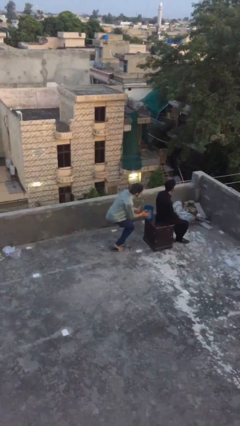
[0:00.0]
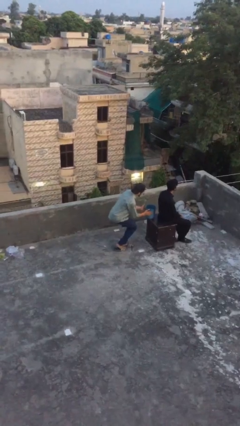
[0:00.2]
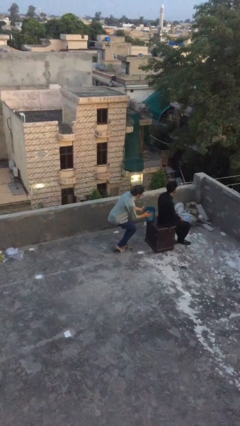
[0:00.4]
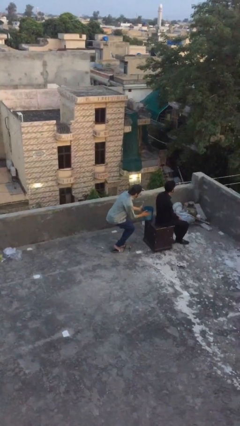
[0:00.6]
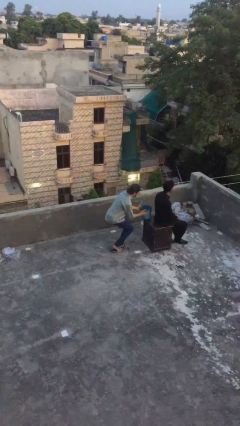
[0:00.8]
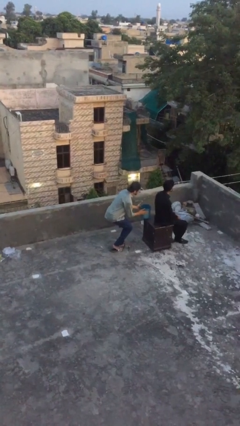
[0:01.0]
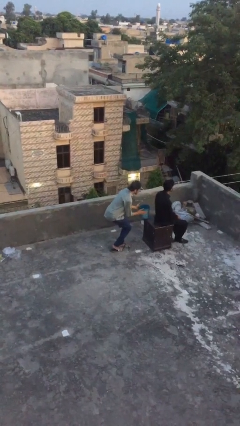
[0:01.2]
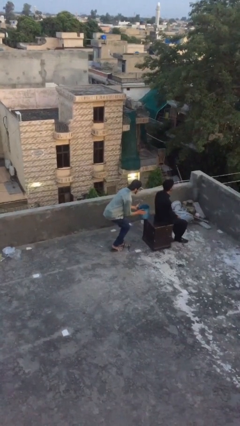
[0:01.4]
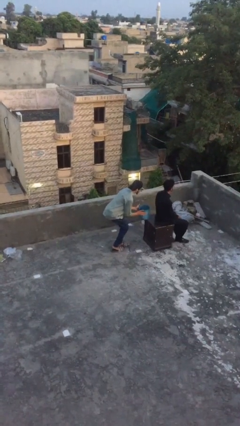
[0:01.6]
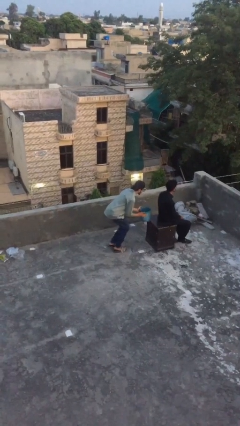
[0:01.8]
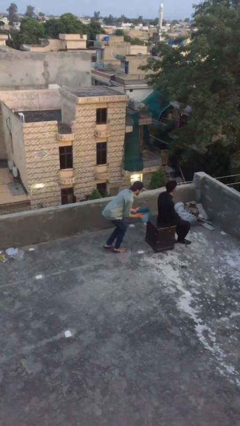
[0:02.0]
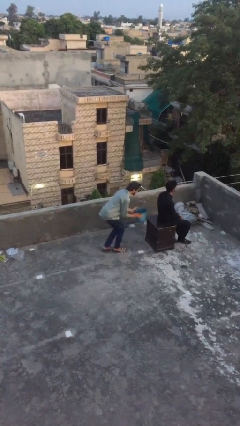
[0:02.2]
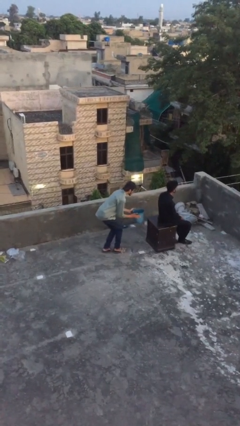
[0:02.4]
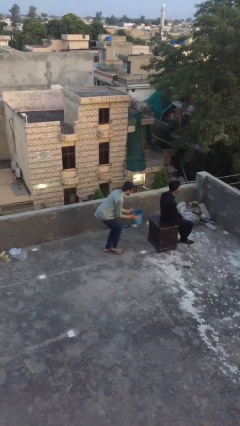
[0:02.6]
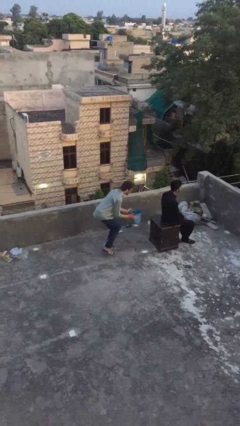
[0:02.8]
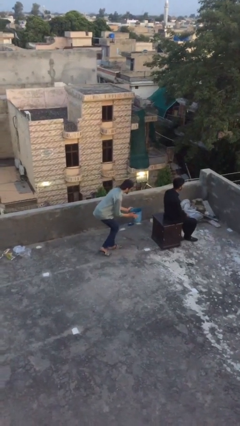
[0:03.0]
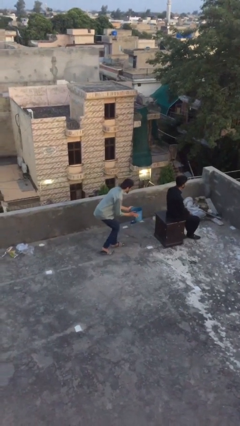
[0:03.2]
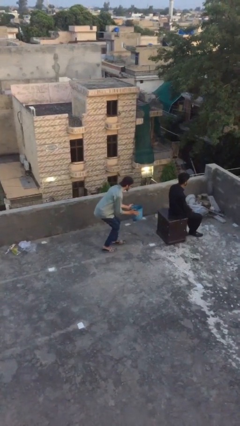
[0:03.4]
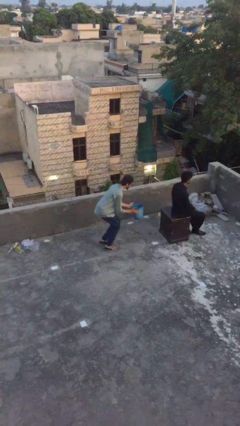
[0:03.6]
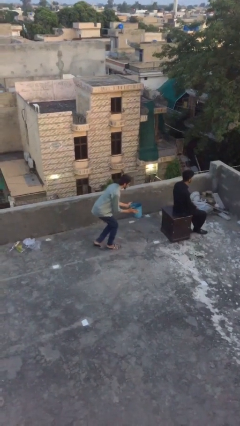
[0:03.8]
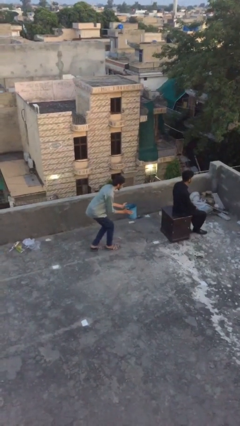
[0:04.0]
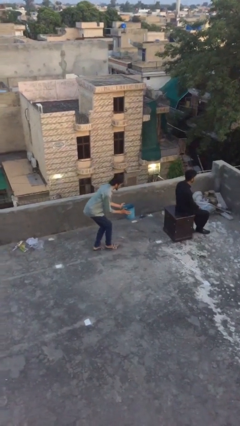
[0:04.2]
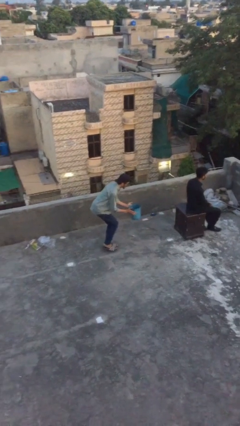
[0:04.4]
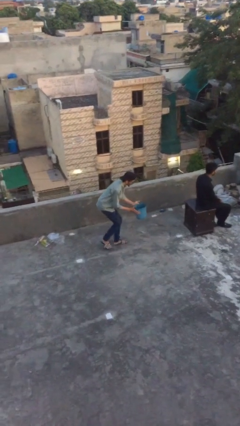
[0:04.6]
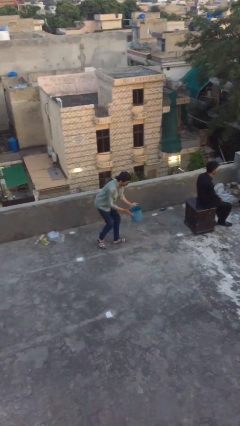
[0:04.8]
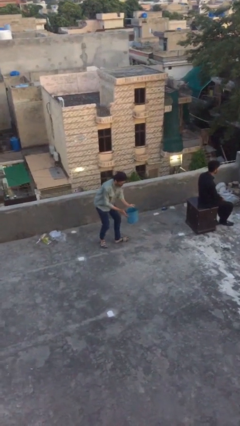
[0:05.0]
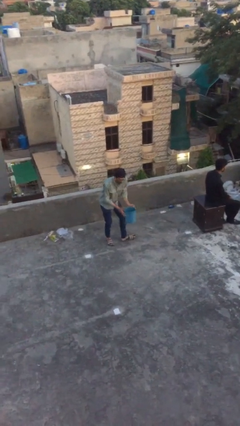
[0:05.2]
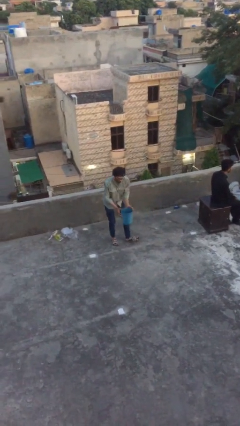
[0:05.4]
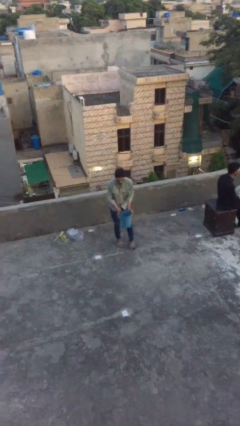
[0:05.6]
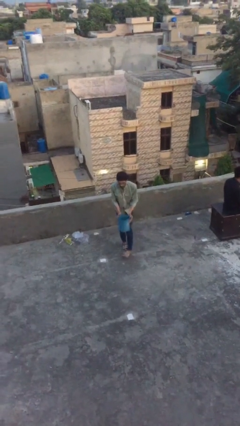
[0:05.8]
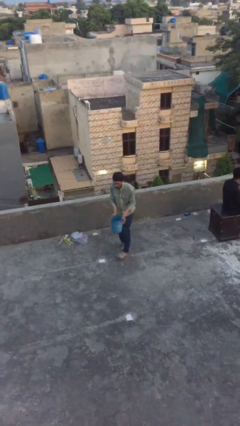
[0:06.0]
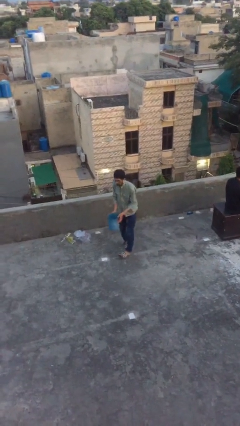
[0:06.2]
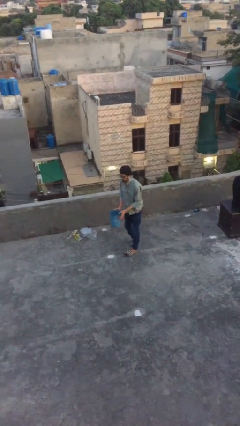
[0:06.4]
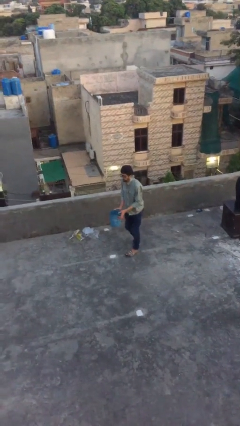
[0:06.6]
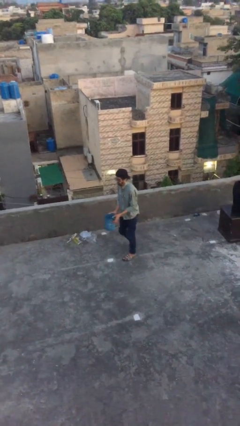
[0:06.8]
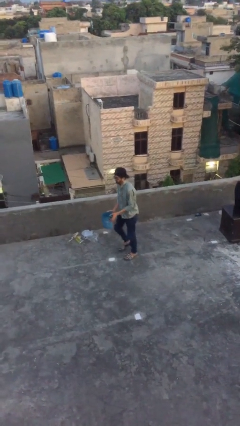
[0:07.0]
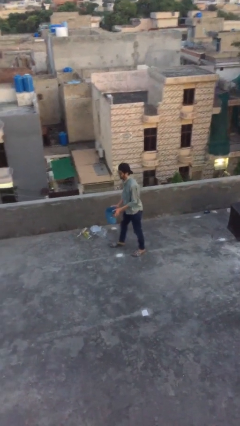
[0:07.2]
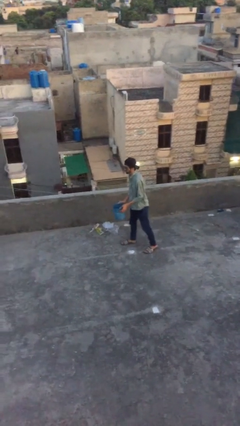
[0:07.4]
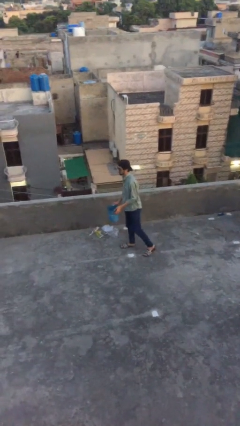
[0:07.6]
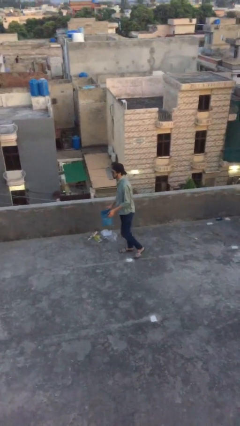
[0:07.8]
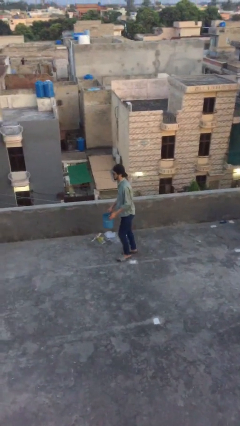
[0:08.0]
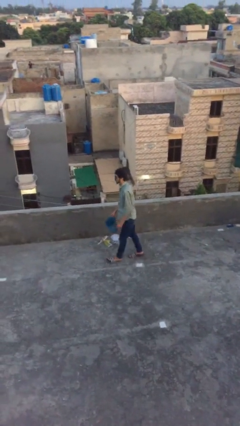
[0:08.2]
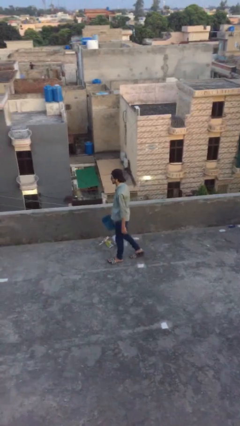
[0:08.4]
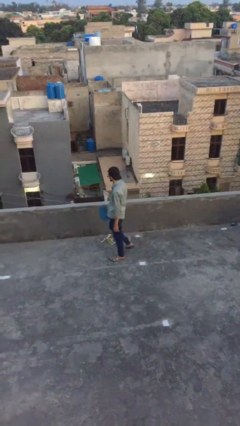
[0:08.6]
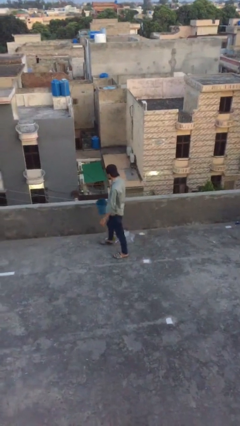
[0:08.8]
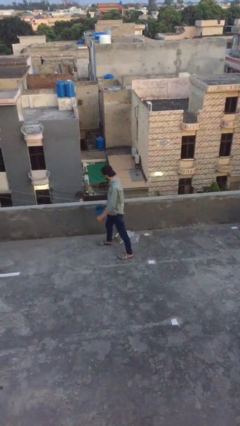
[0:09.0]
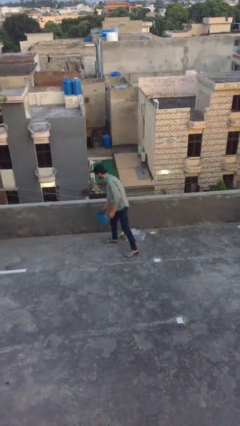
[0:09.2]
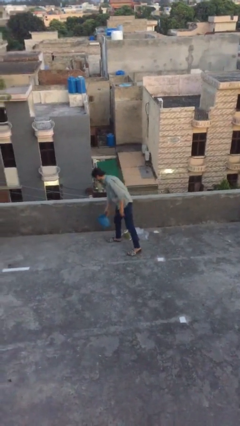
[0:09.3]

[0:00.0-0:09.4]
person steals object from person

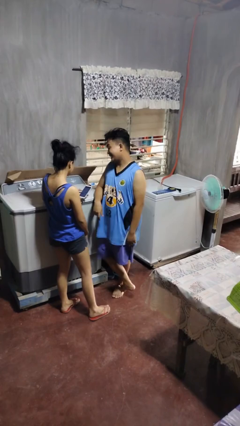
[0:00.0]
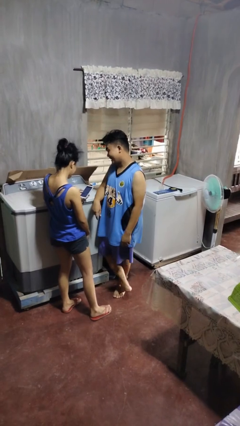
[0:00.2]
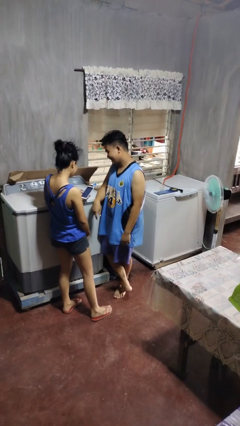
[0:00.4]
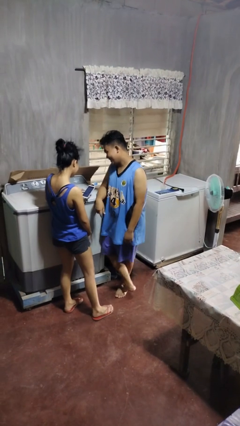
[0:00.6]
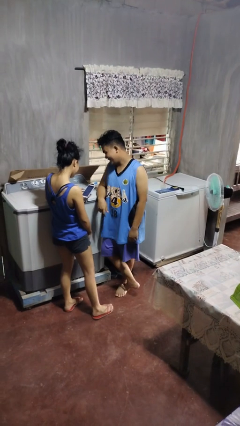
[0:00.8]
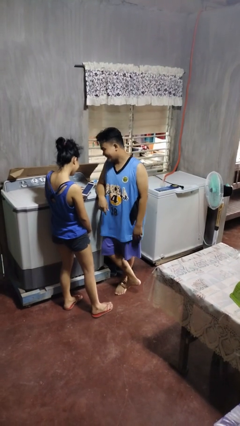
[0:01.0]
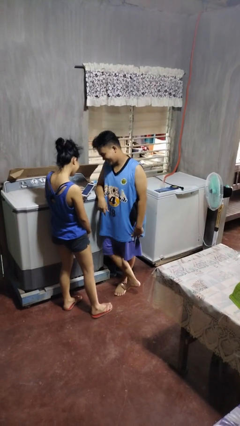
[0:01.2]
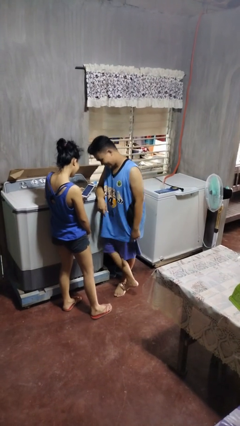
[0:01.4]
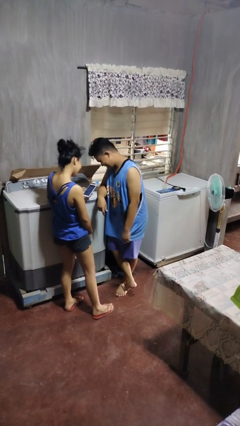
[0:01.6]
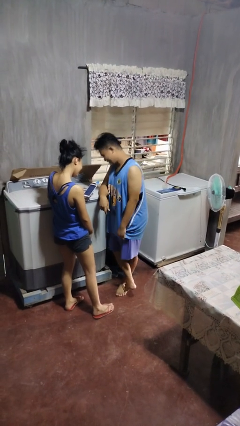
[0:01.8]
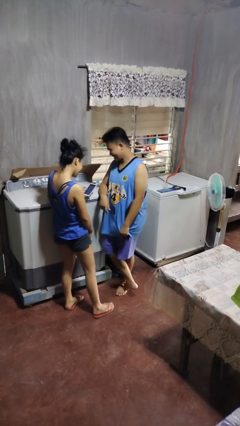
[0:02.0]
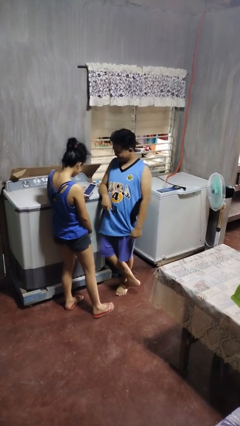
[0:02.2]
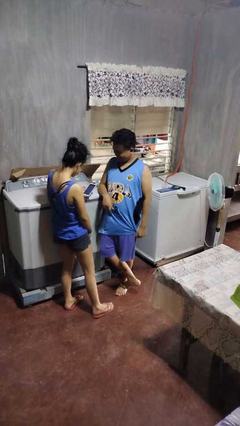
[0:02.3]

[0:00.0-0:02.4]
person laughs with person

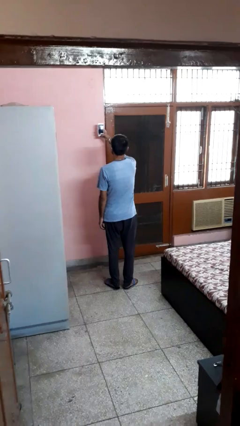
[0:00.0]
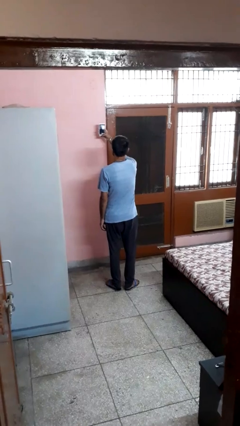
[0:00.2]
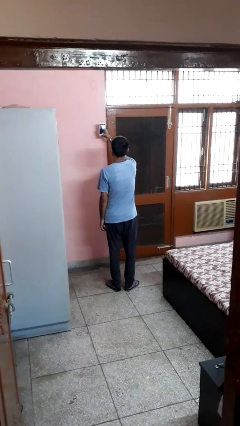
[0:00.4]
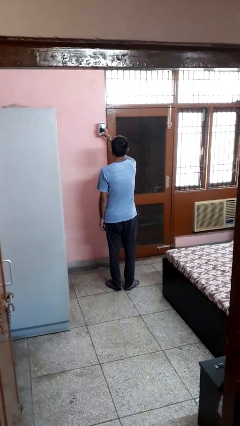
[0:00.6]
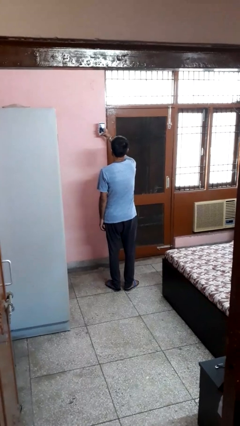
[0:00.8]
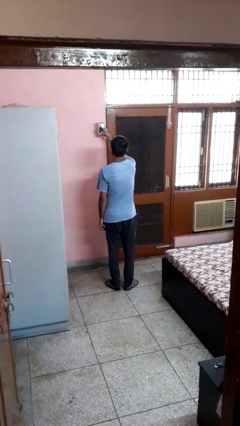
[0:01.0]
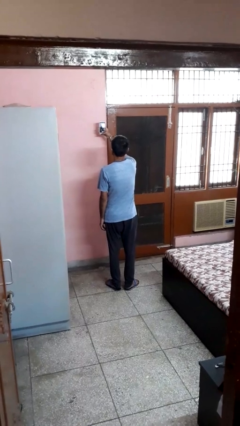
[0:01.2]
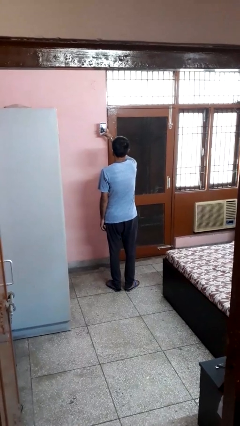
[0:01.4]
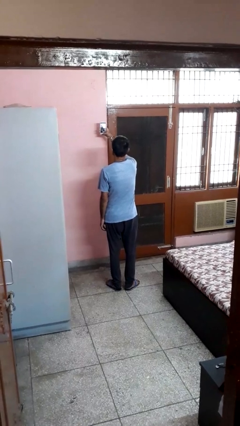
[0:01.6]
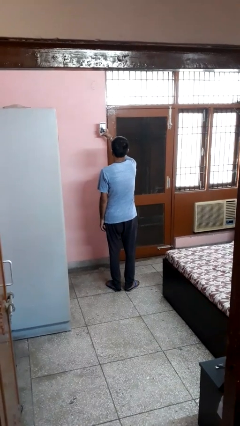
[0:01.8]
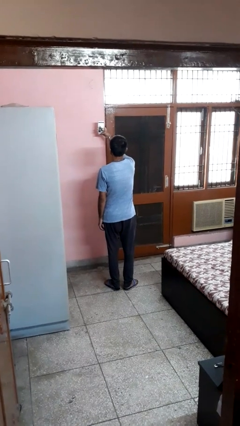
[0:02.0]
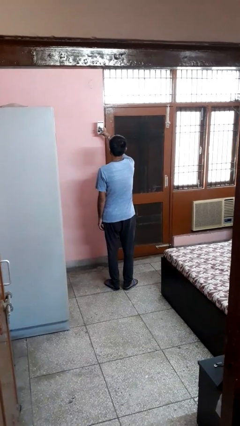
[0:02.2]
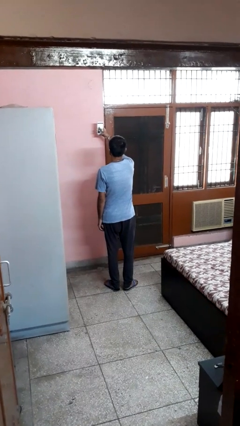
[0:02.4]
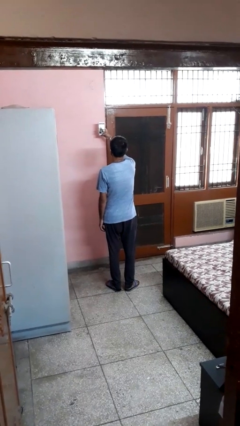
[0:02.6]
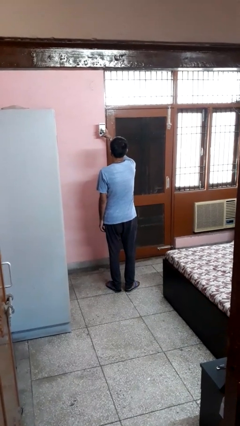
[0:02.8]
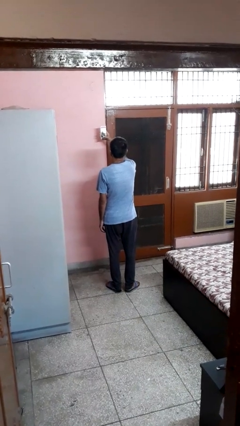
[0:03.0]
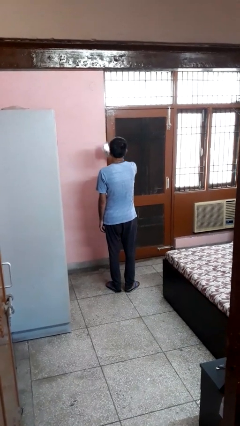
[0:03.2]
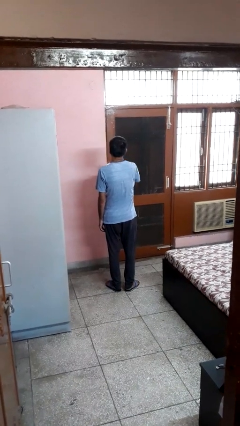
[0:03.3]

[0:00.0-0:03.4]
person takes selfie

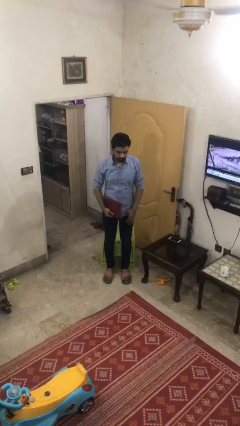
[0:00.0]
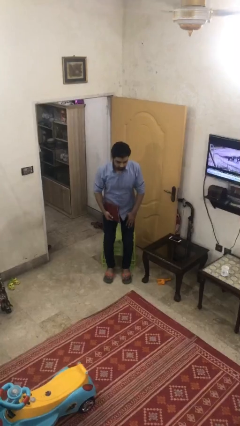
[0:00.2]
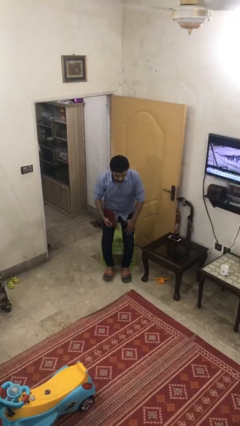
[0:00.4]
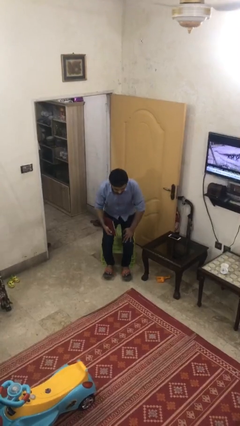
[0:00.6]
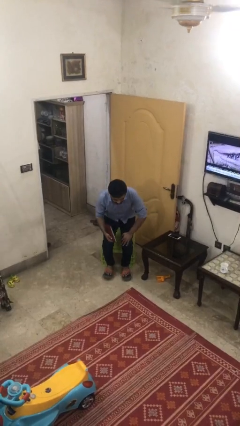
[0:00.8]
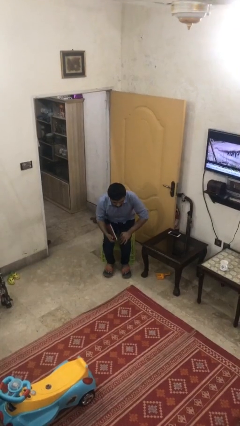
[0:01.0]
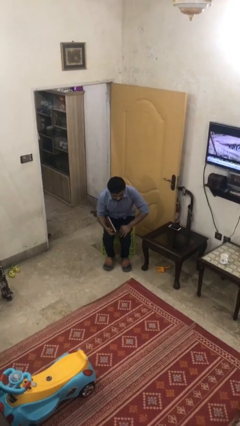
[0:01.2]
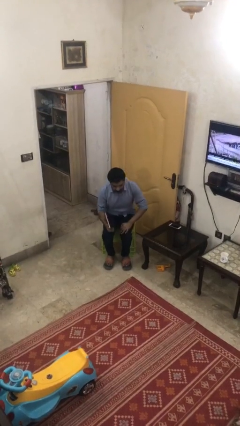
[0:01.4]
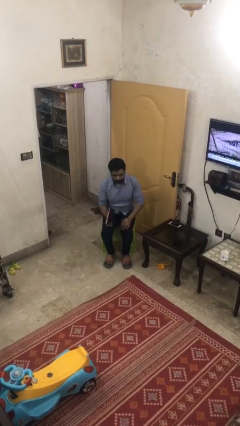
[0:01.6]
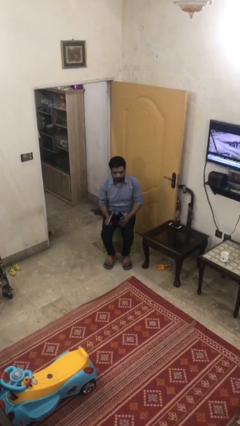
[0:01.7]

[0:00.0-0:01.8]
person sits down

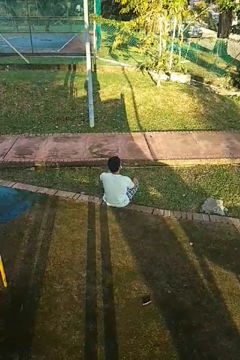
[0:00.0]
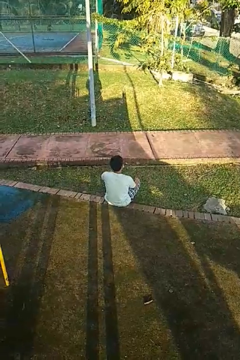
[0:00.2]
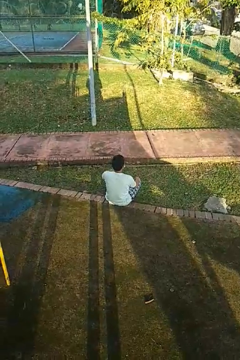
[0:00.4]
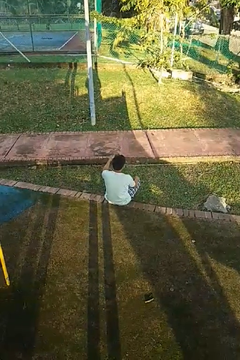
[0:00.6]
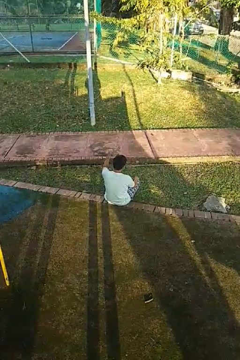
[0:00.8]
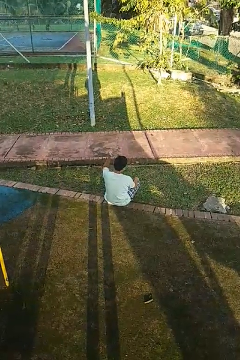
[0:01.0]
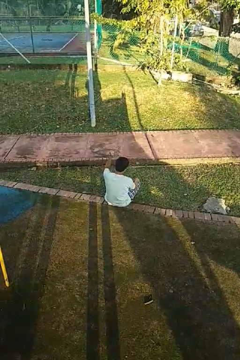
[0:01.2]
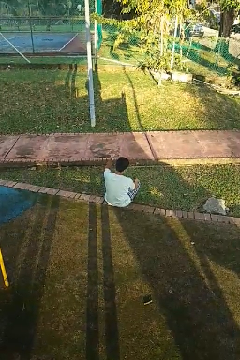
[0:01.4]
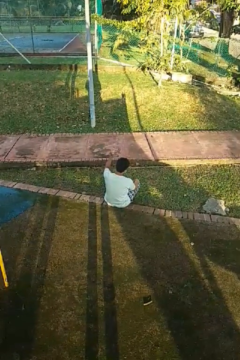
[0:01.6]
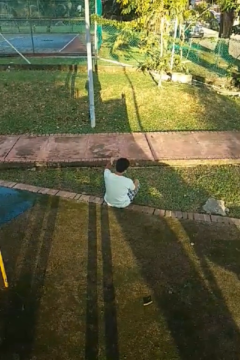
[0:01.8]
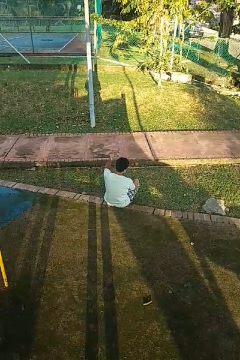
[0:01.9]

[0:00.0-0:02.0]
person gestures behind me
